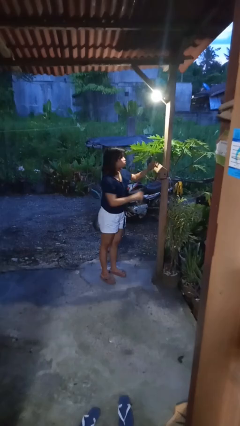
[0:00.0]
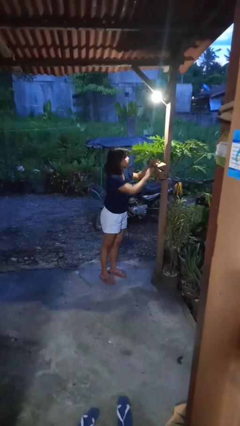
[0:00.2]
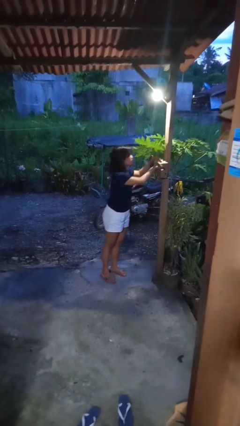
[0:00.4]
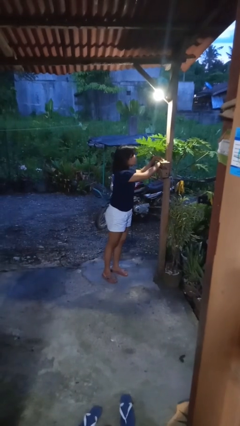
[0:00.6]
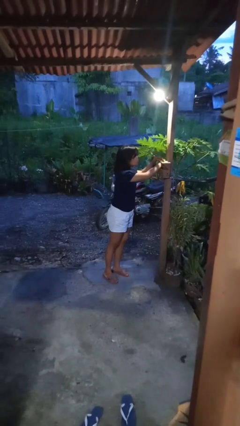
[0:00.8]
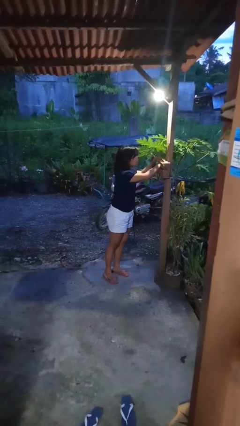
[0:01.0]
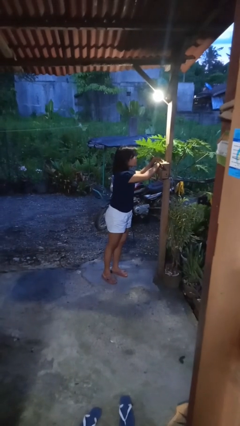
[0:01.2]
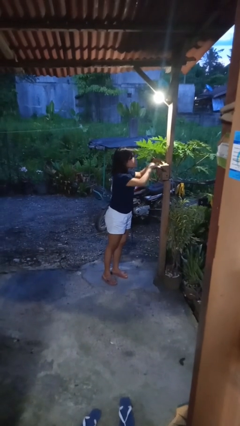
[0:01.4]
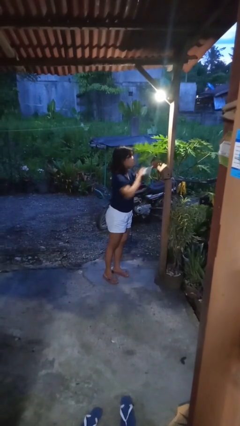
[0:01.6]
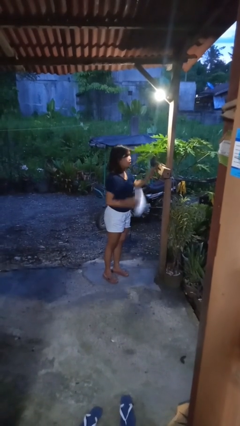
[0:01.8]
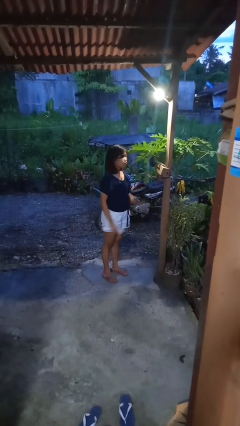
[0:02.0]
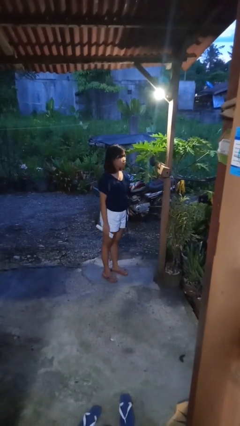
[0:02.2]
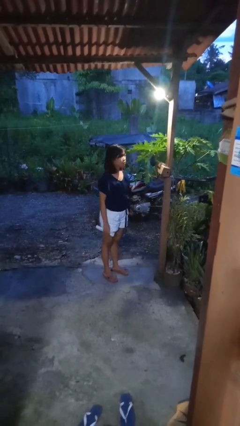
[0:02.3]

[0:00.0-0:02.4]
person takes letters from mailbox

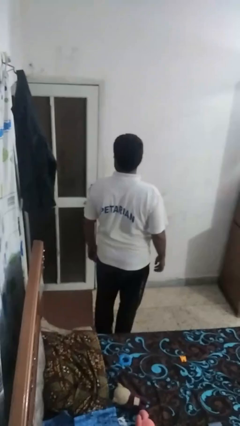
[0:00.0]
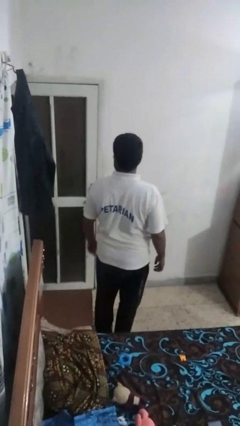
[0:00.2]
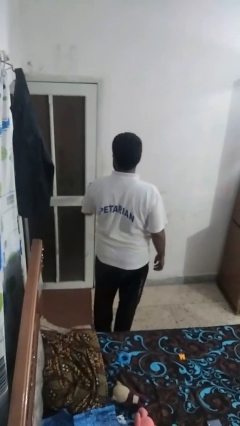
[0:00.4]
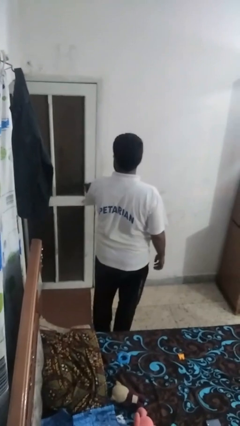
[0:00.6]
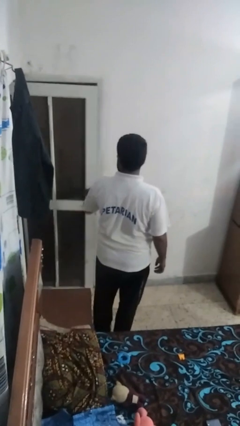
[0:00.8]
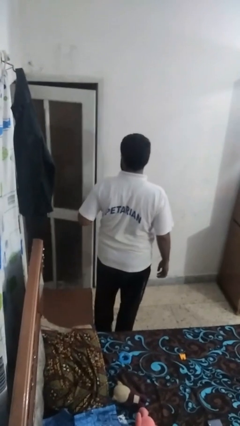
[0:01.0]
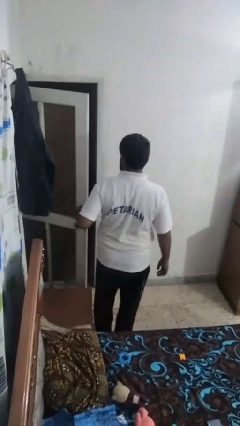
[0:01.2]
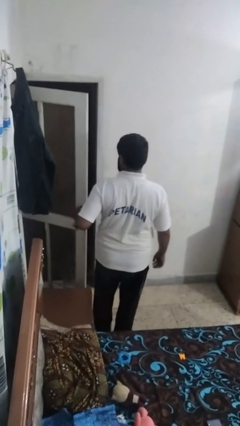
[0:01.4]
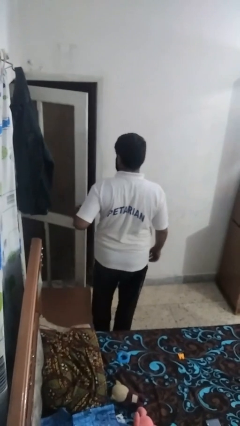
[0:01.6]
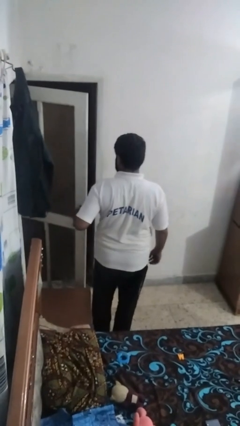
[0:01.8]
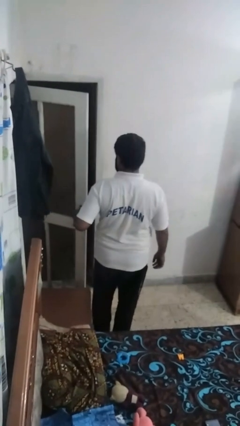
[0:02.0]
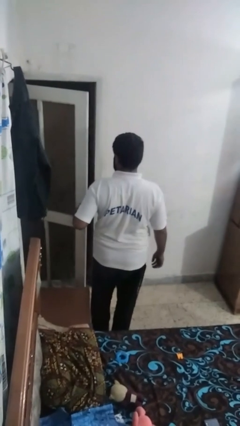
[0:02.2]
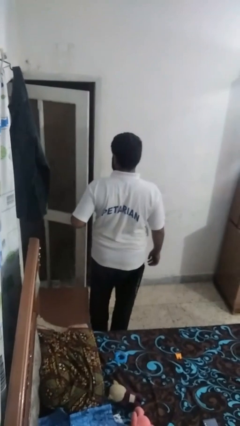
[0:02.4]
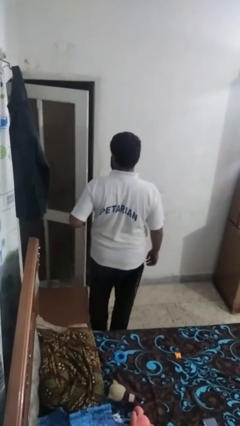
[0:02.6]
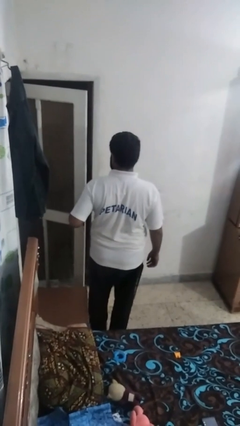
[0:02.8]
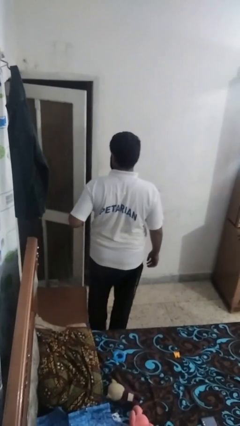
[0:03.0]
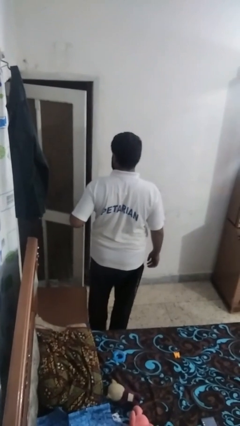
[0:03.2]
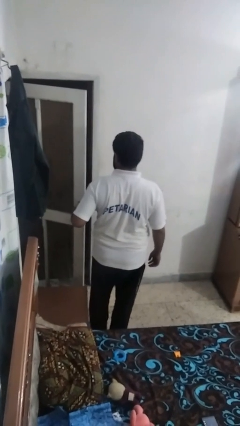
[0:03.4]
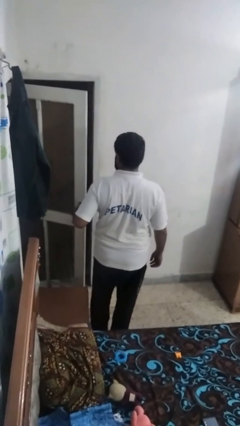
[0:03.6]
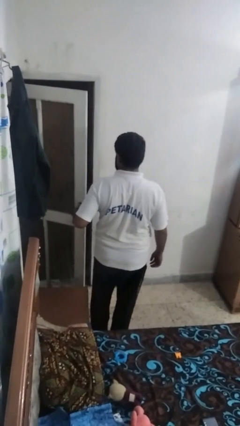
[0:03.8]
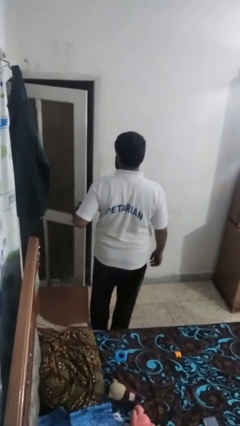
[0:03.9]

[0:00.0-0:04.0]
person opens facility door

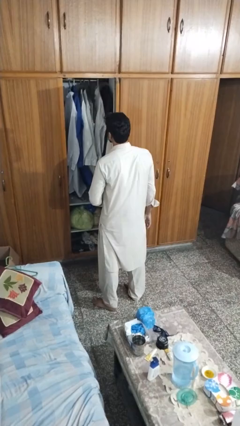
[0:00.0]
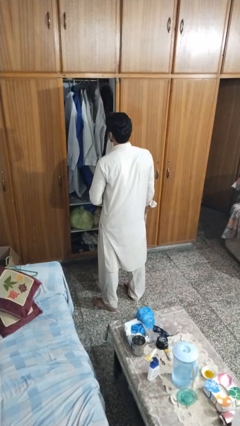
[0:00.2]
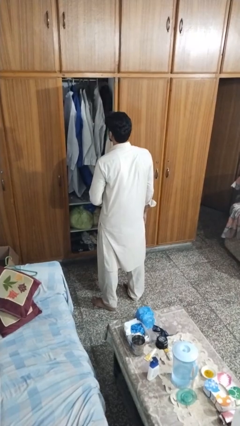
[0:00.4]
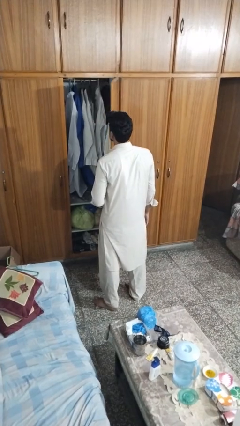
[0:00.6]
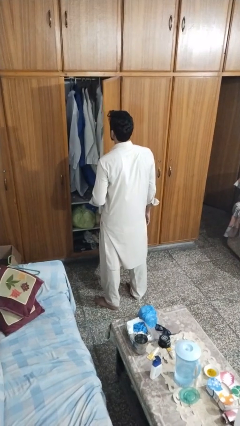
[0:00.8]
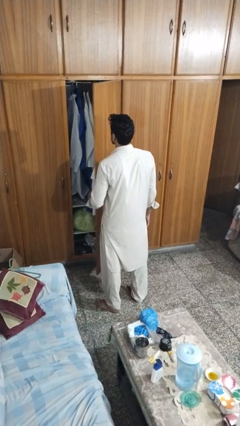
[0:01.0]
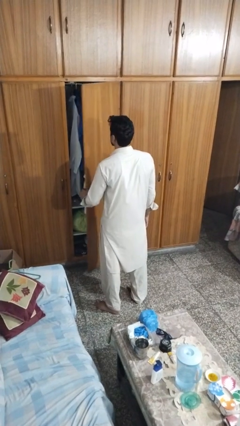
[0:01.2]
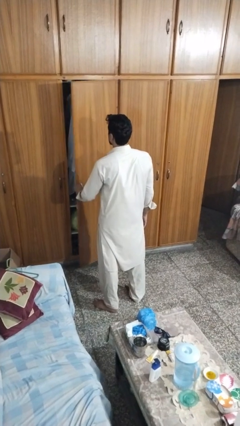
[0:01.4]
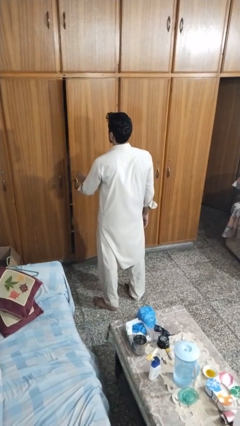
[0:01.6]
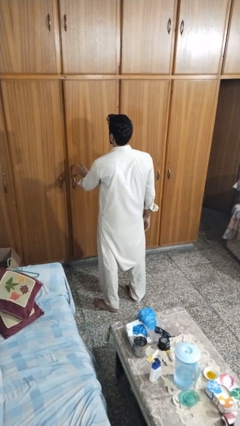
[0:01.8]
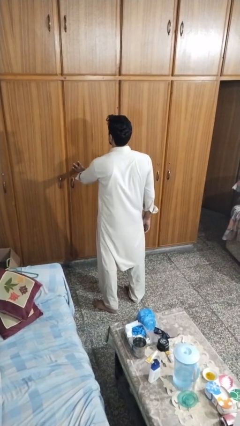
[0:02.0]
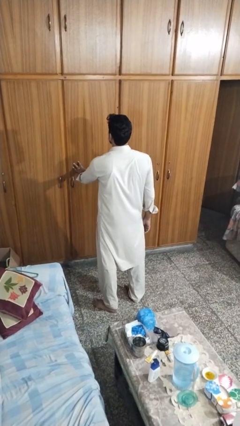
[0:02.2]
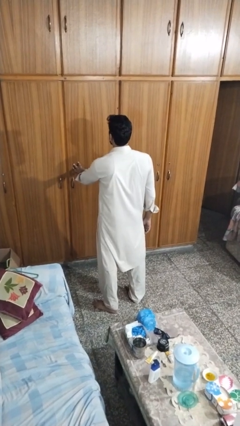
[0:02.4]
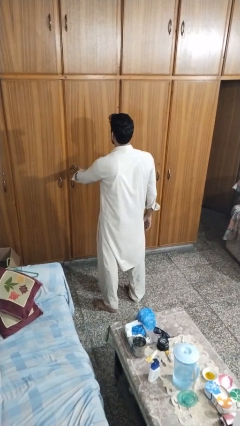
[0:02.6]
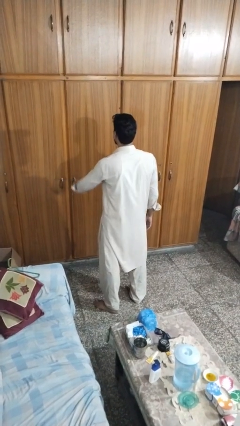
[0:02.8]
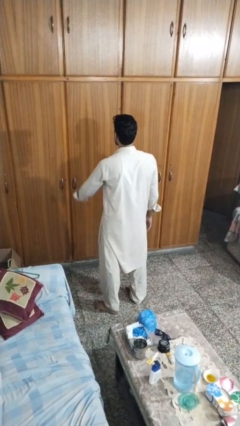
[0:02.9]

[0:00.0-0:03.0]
person closes closet door

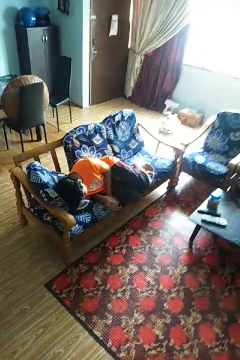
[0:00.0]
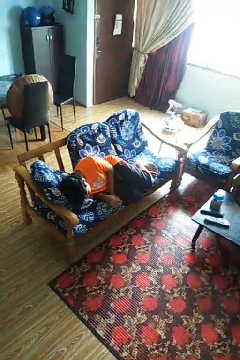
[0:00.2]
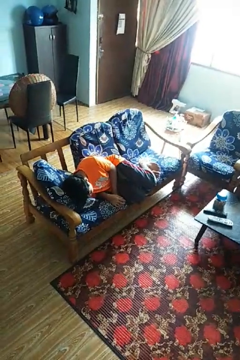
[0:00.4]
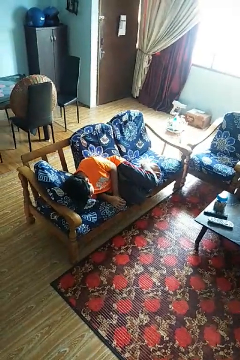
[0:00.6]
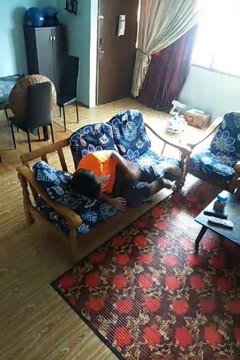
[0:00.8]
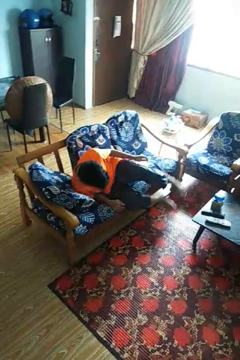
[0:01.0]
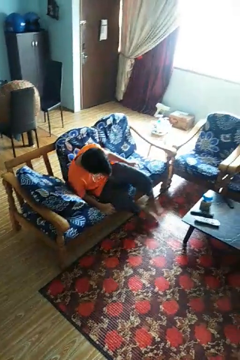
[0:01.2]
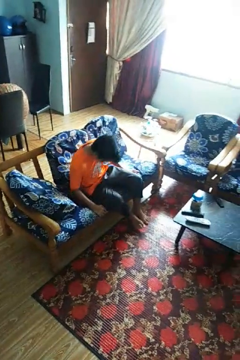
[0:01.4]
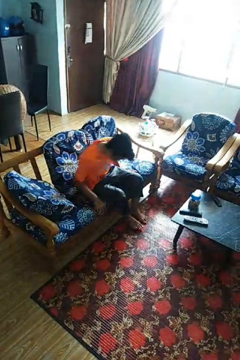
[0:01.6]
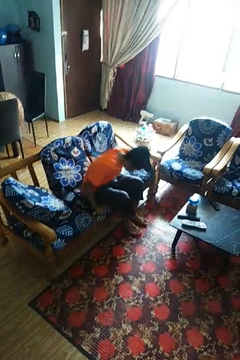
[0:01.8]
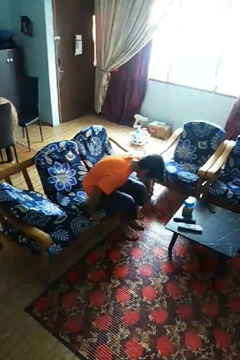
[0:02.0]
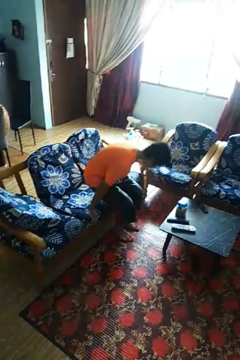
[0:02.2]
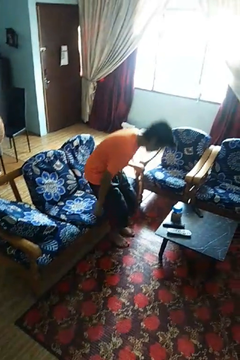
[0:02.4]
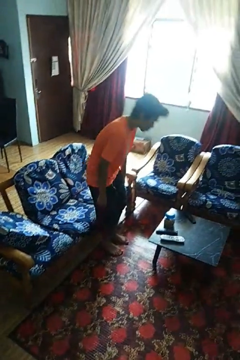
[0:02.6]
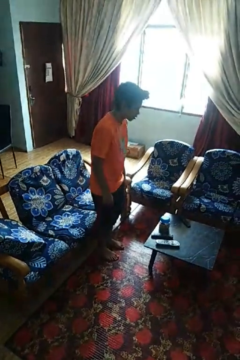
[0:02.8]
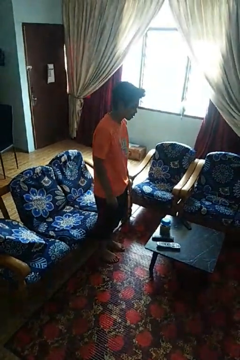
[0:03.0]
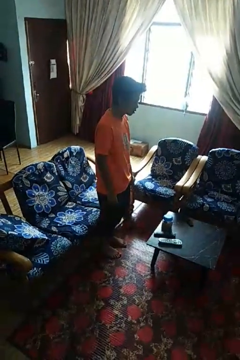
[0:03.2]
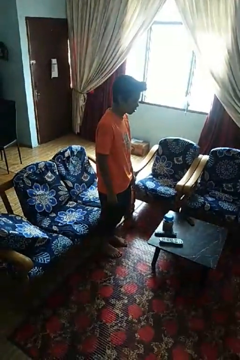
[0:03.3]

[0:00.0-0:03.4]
person stands up

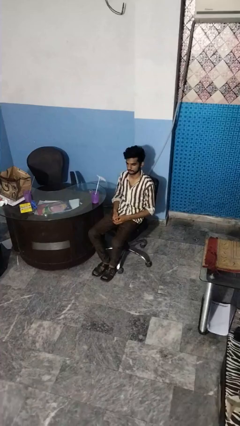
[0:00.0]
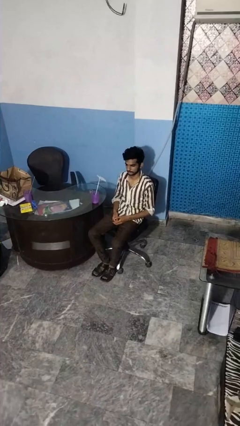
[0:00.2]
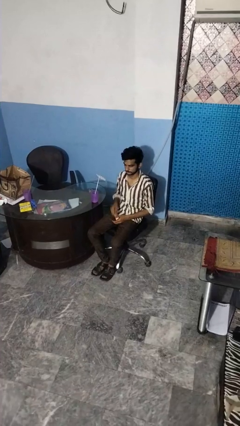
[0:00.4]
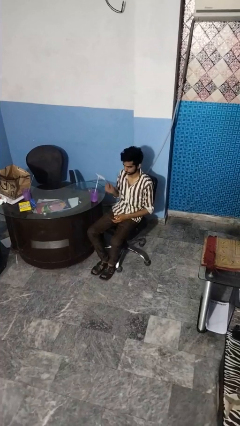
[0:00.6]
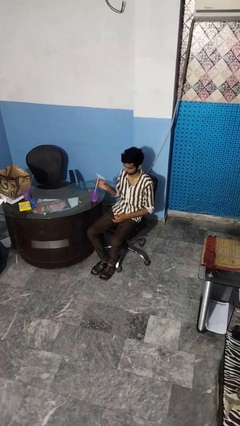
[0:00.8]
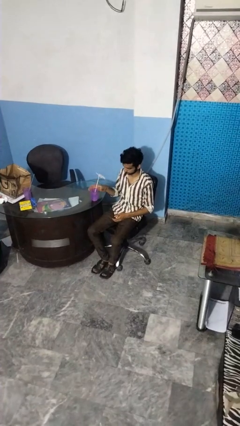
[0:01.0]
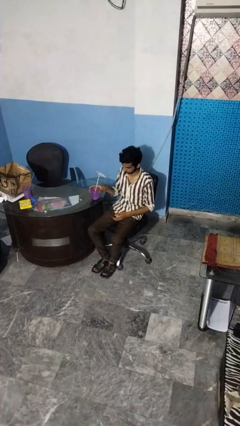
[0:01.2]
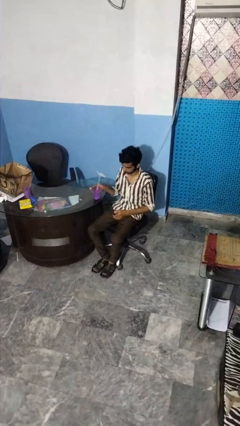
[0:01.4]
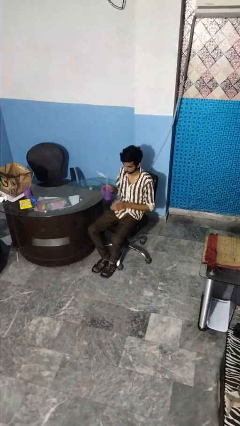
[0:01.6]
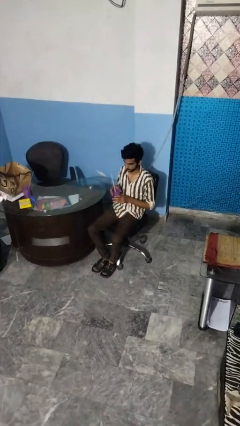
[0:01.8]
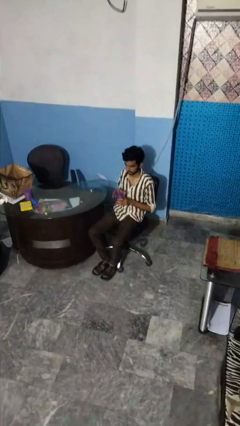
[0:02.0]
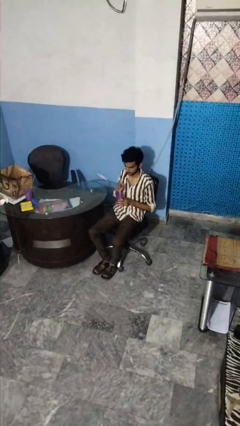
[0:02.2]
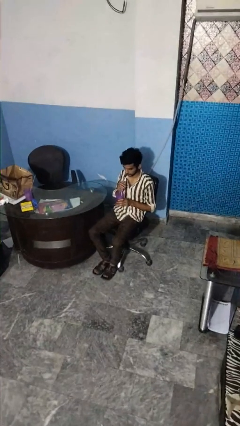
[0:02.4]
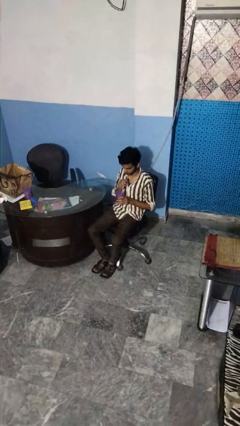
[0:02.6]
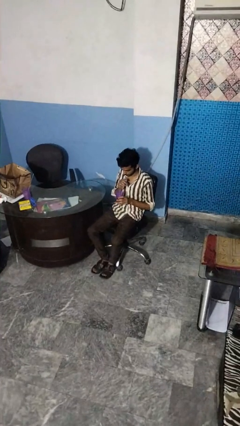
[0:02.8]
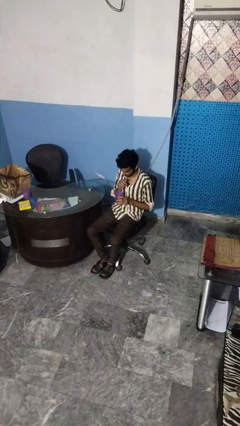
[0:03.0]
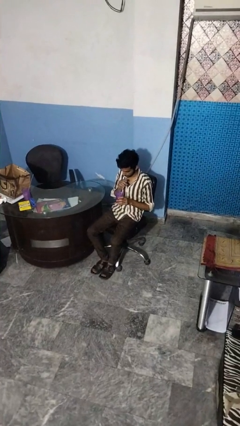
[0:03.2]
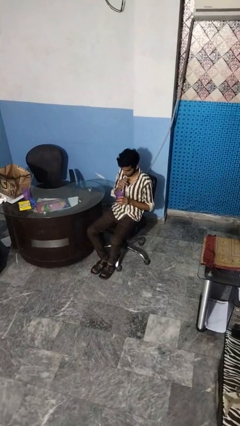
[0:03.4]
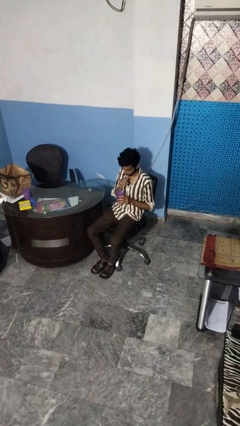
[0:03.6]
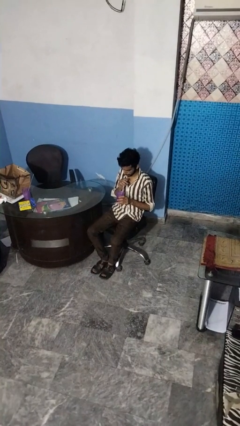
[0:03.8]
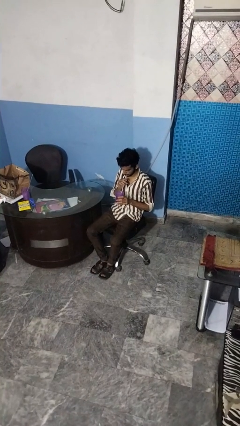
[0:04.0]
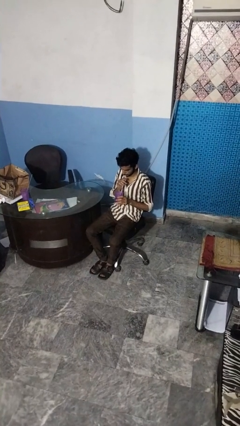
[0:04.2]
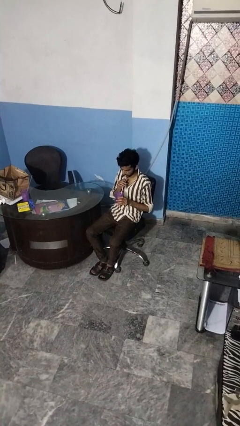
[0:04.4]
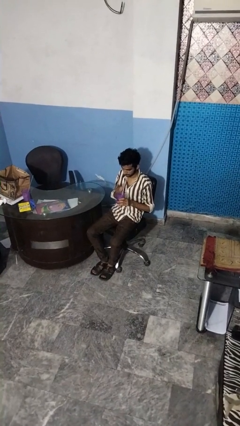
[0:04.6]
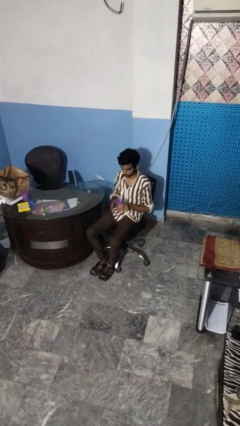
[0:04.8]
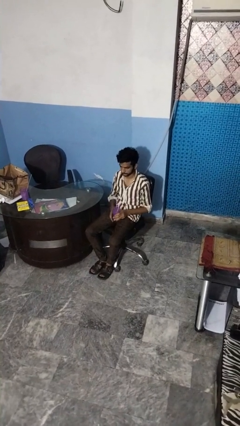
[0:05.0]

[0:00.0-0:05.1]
person drinks from straw
